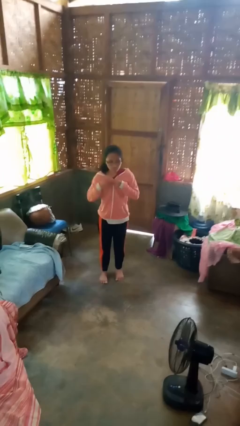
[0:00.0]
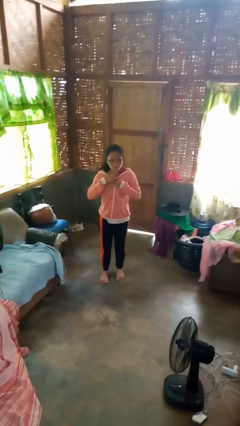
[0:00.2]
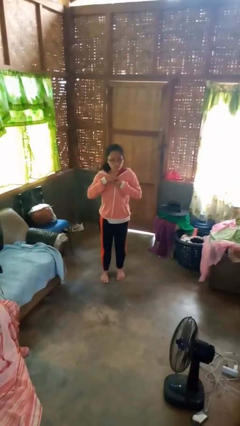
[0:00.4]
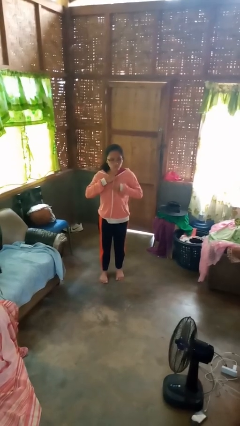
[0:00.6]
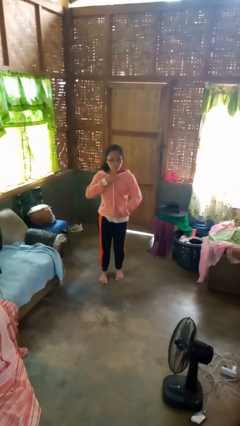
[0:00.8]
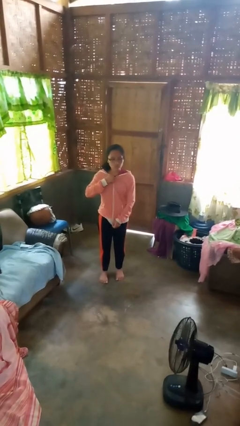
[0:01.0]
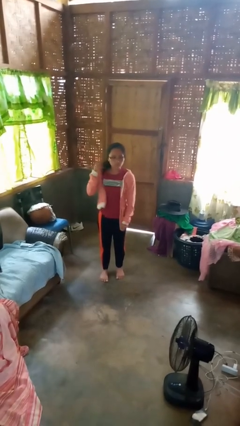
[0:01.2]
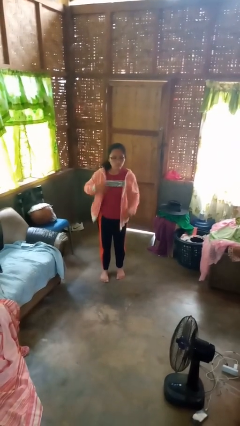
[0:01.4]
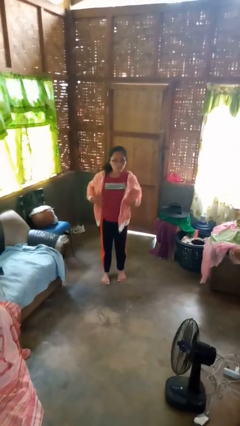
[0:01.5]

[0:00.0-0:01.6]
person unzips jacket

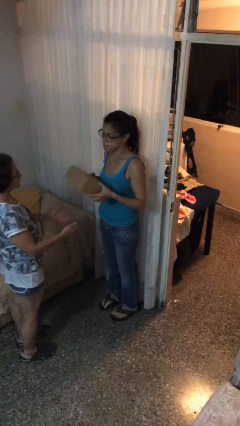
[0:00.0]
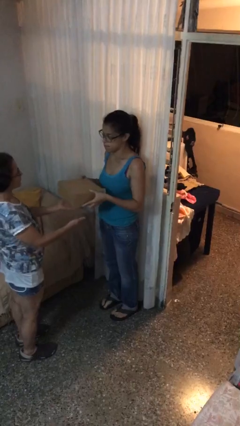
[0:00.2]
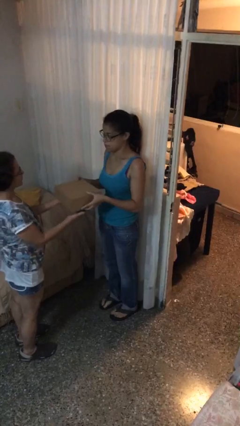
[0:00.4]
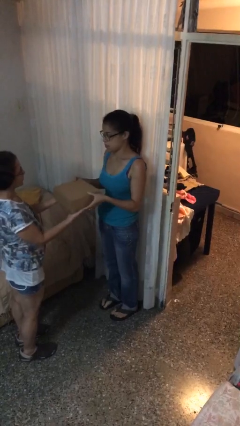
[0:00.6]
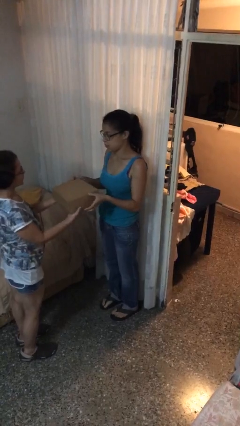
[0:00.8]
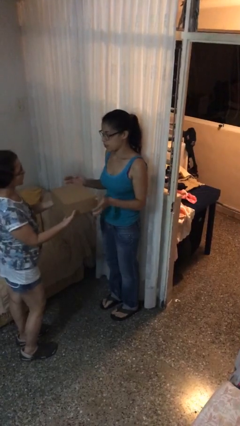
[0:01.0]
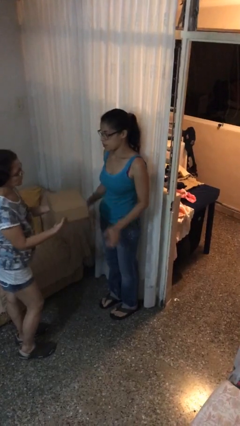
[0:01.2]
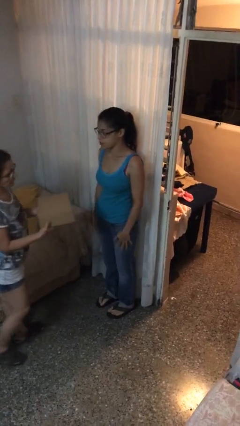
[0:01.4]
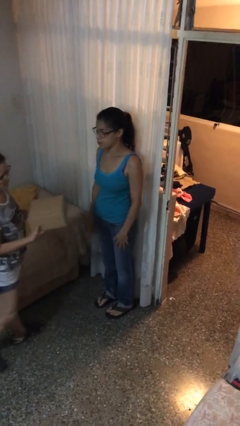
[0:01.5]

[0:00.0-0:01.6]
person transfers object to person

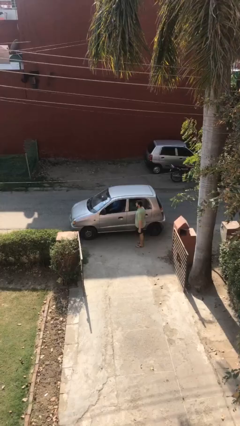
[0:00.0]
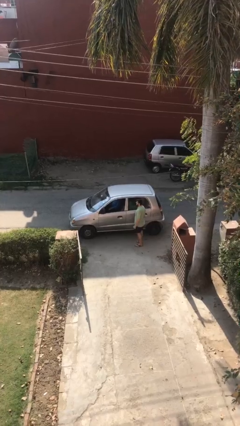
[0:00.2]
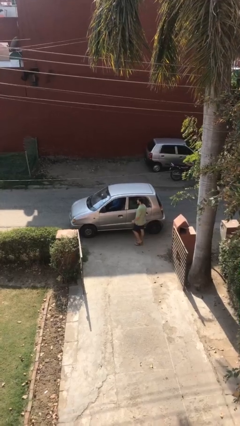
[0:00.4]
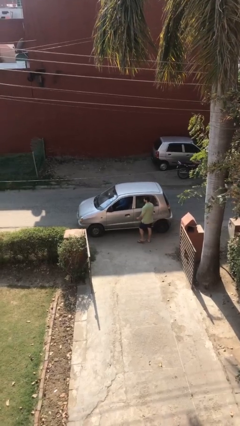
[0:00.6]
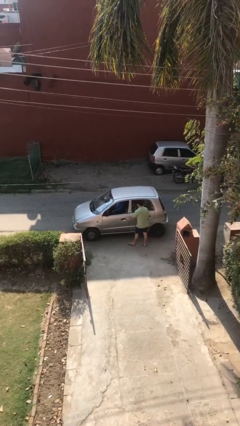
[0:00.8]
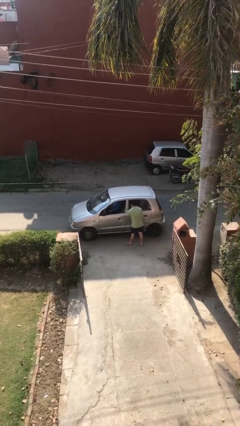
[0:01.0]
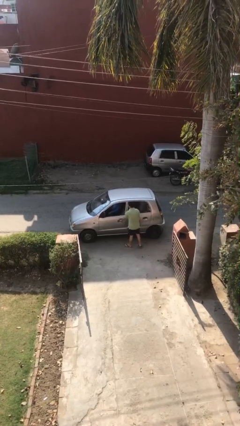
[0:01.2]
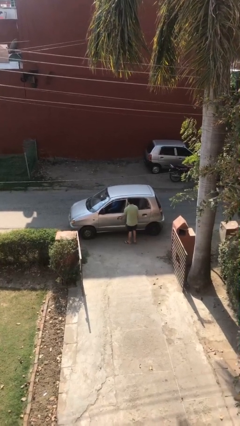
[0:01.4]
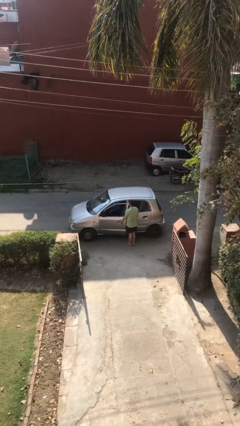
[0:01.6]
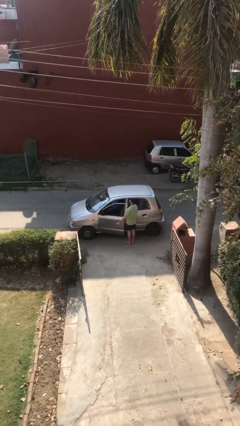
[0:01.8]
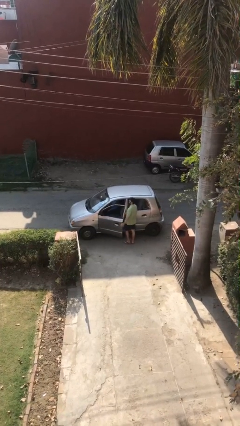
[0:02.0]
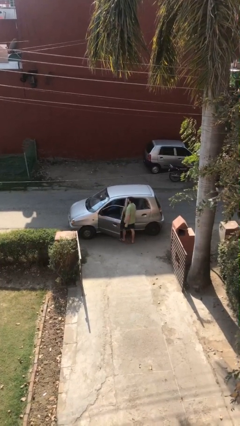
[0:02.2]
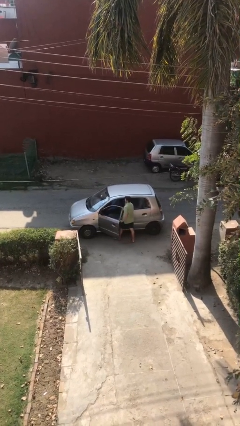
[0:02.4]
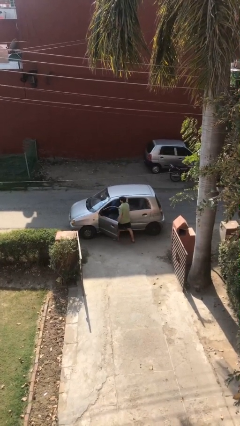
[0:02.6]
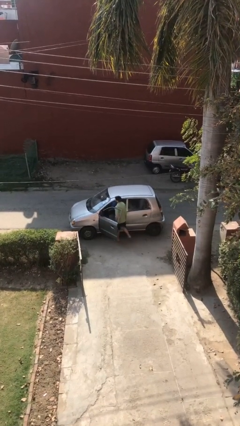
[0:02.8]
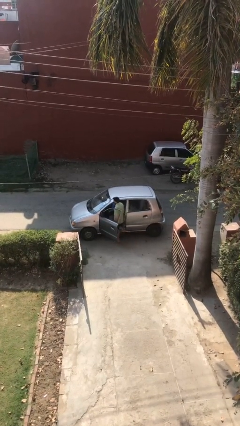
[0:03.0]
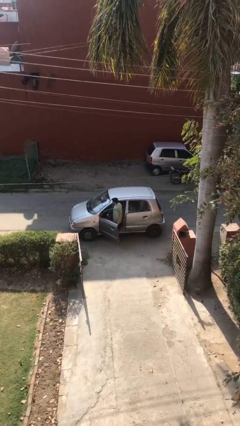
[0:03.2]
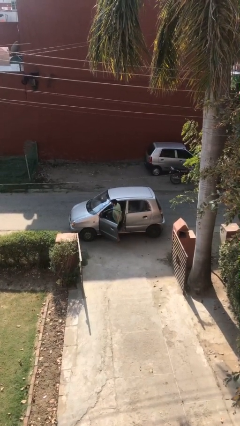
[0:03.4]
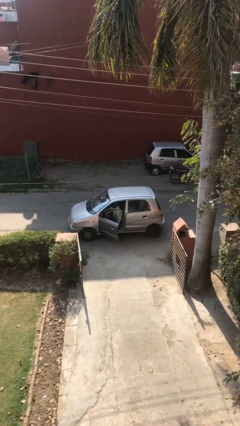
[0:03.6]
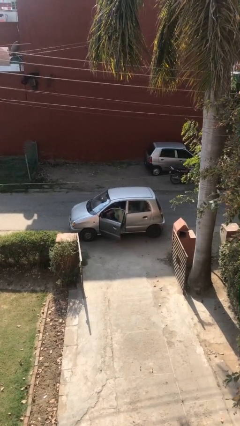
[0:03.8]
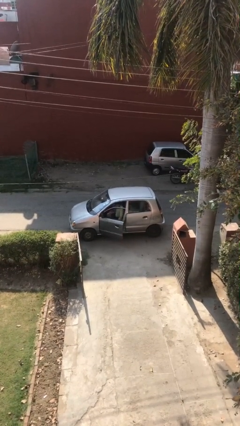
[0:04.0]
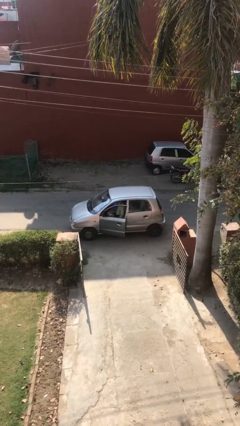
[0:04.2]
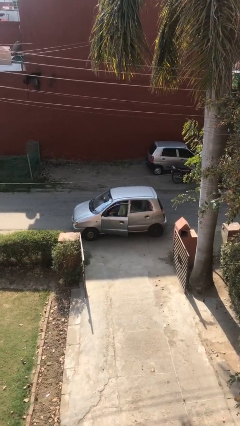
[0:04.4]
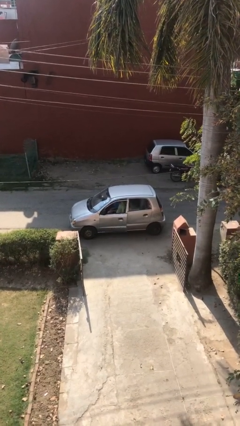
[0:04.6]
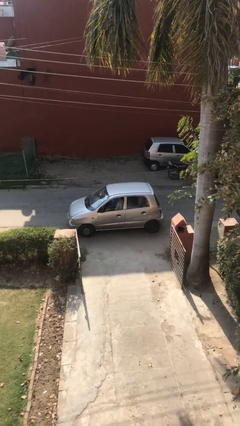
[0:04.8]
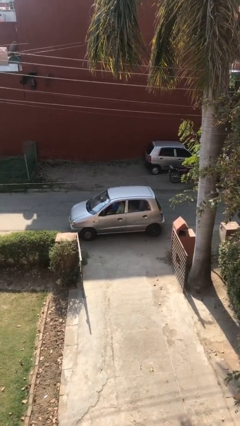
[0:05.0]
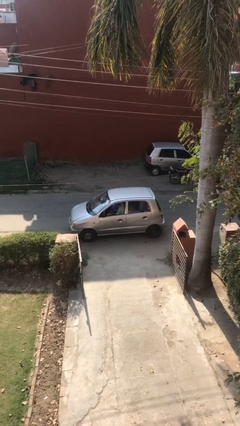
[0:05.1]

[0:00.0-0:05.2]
car picks up person

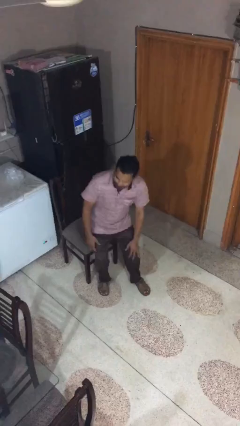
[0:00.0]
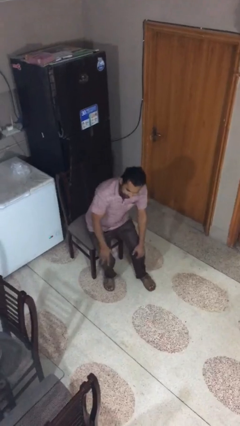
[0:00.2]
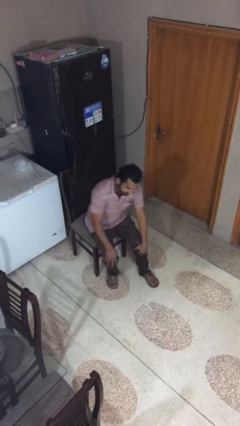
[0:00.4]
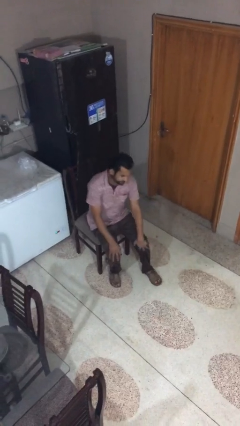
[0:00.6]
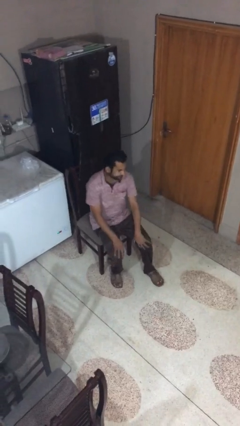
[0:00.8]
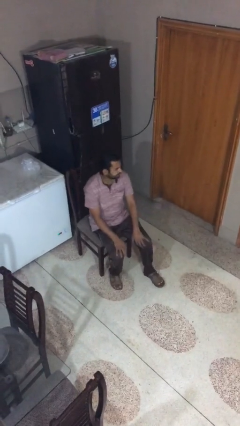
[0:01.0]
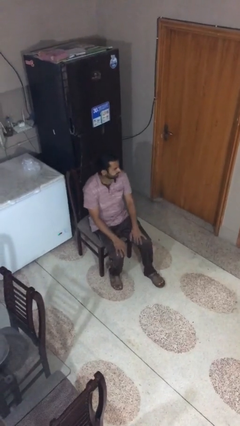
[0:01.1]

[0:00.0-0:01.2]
person sits down

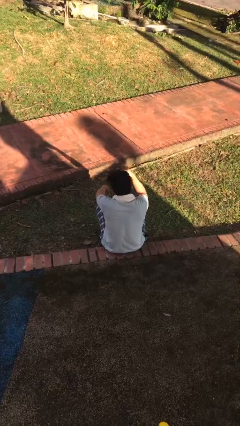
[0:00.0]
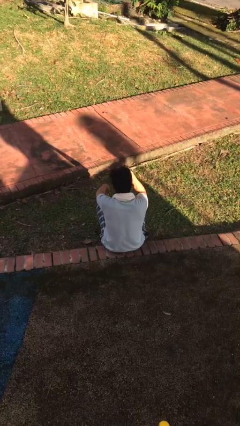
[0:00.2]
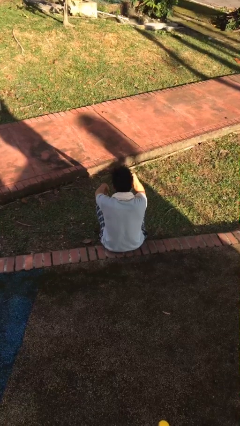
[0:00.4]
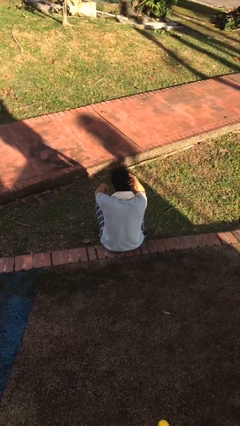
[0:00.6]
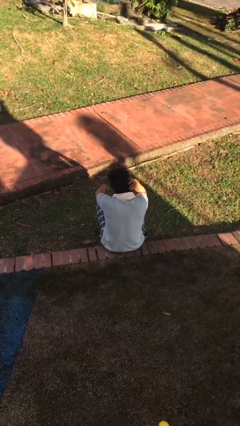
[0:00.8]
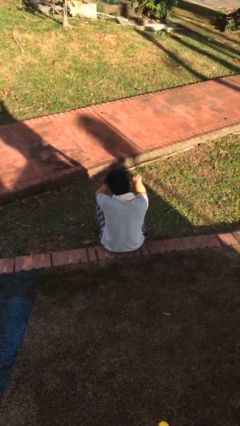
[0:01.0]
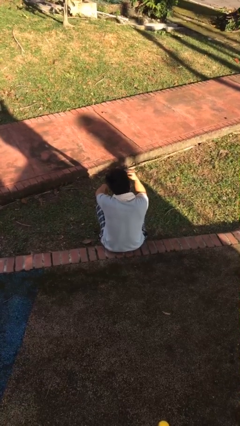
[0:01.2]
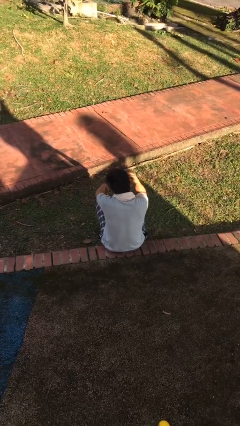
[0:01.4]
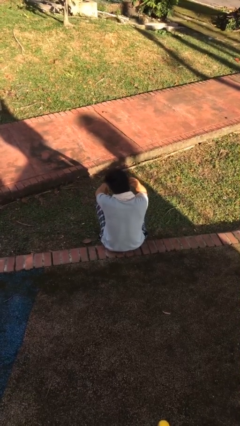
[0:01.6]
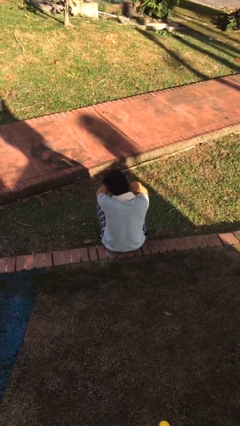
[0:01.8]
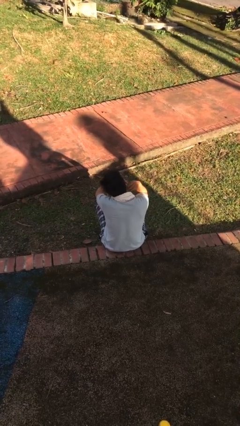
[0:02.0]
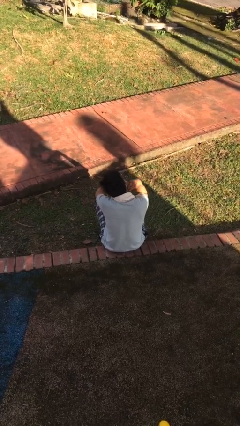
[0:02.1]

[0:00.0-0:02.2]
person strokes hair

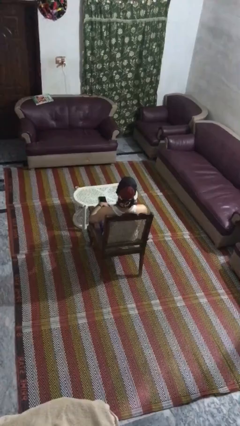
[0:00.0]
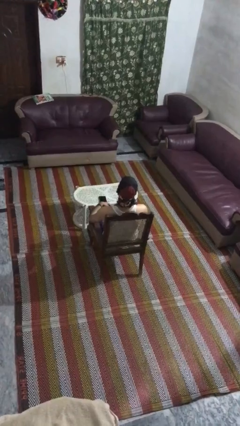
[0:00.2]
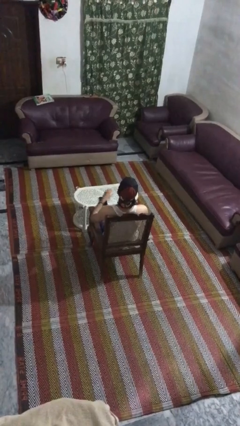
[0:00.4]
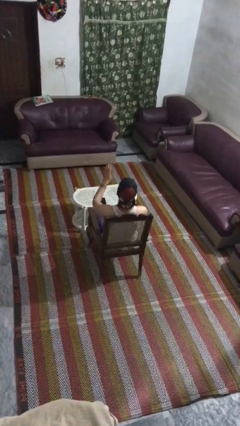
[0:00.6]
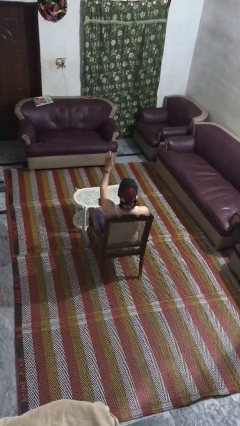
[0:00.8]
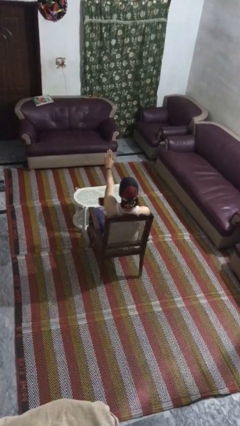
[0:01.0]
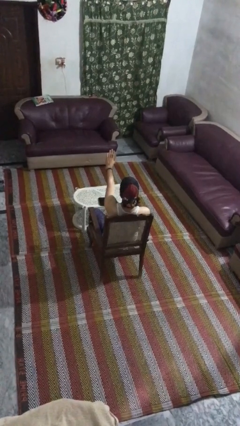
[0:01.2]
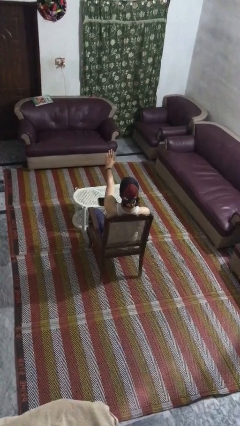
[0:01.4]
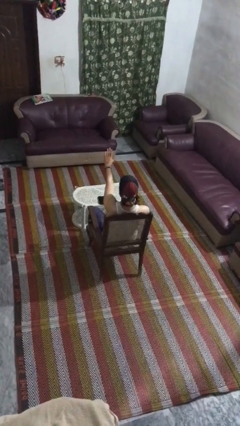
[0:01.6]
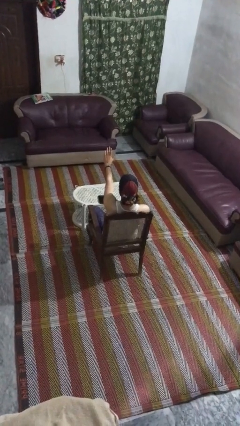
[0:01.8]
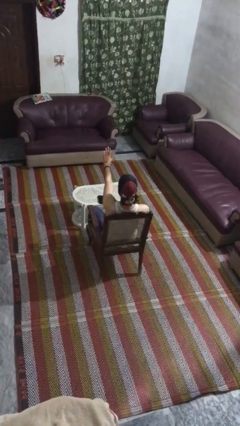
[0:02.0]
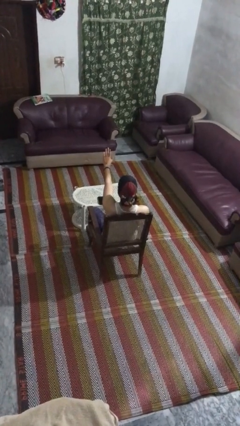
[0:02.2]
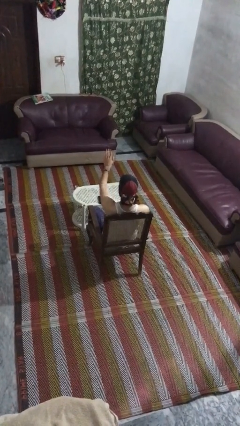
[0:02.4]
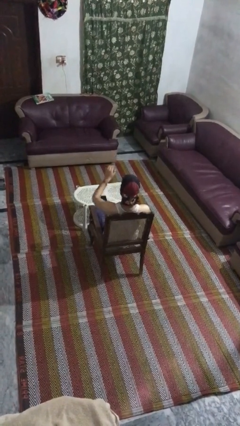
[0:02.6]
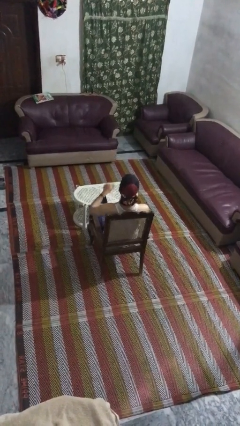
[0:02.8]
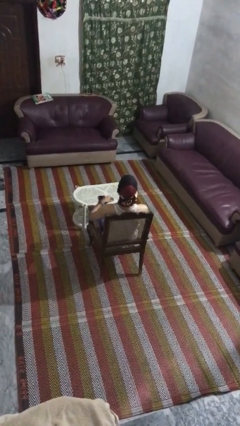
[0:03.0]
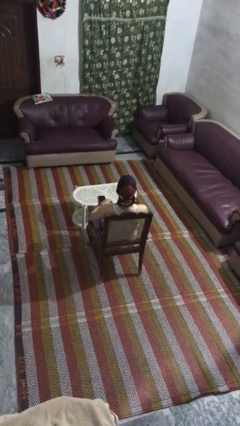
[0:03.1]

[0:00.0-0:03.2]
person gestures stop

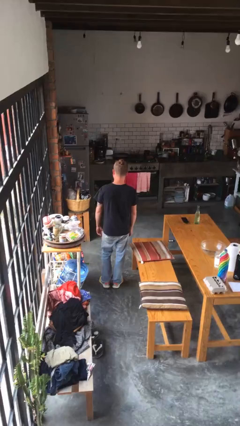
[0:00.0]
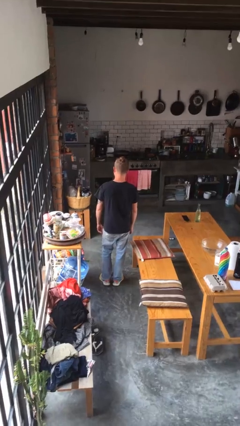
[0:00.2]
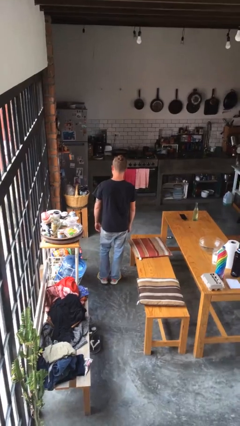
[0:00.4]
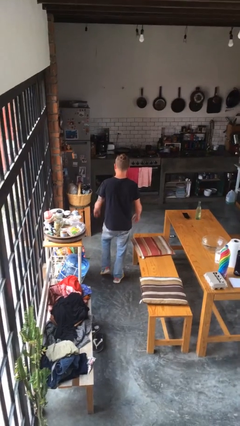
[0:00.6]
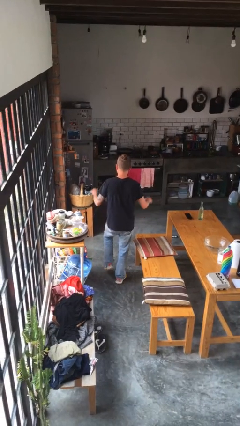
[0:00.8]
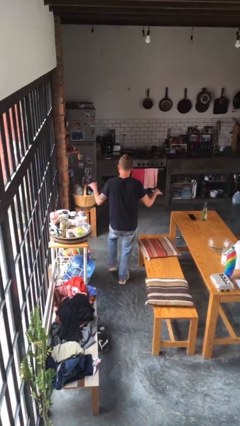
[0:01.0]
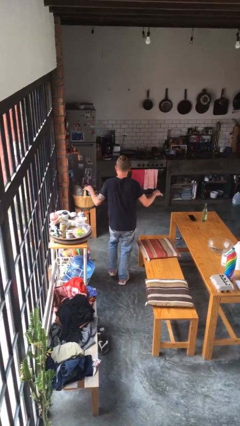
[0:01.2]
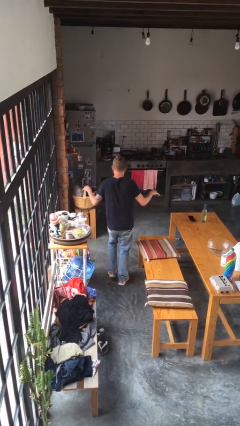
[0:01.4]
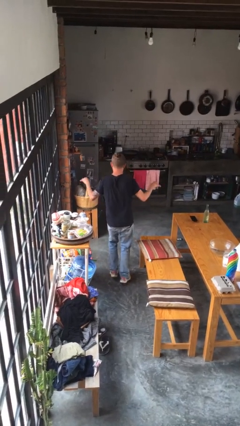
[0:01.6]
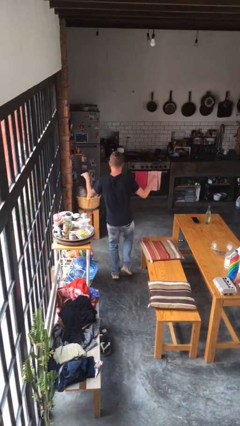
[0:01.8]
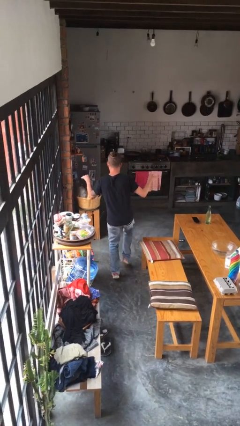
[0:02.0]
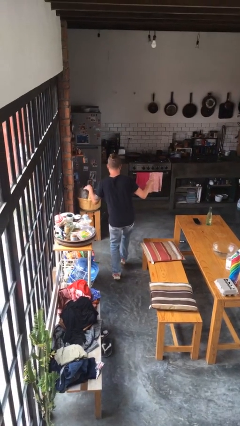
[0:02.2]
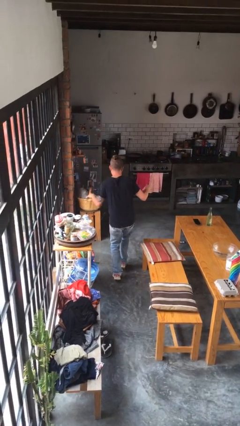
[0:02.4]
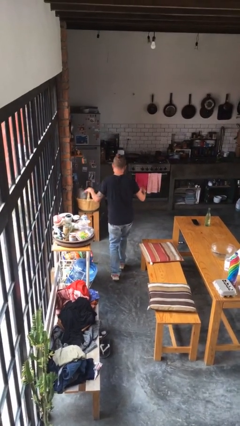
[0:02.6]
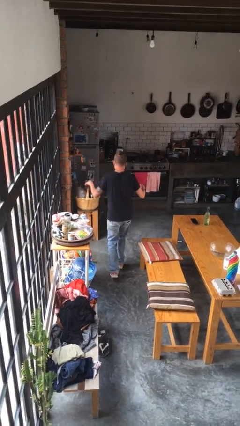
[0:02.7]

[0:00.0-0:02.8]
person walks tiptoe
